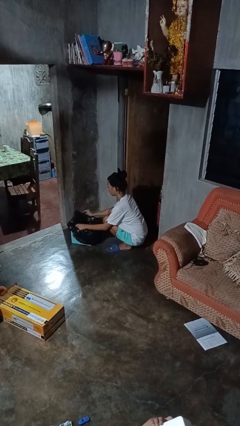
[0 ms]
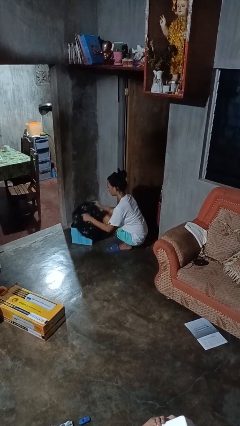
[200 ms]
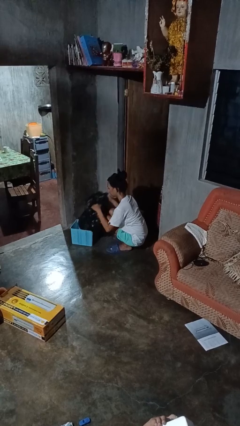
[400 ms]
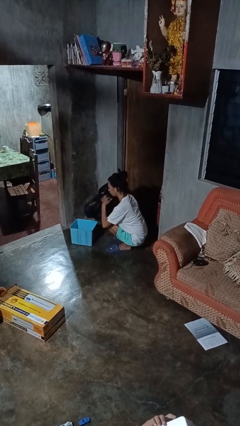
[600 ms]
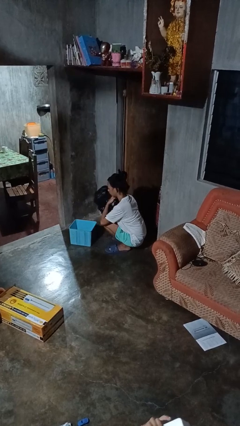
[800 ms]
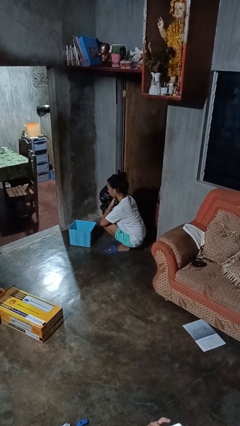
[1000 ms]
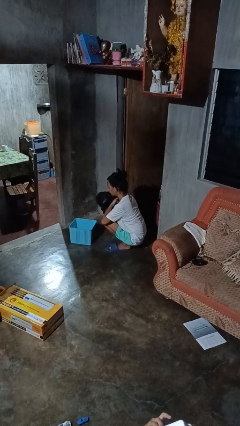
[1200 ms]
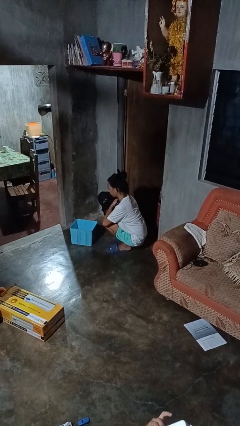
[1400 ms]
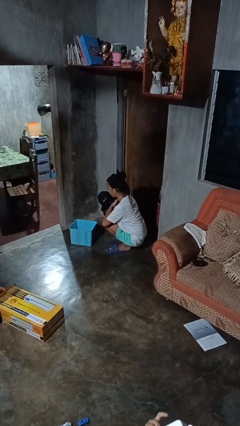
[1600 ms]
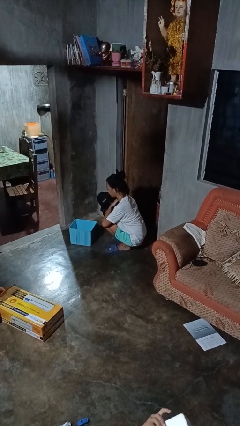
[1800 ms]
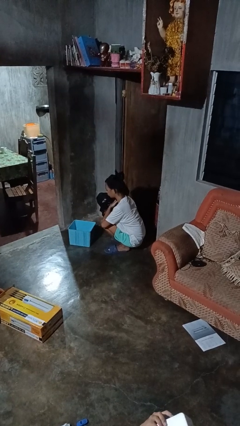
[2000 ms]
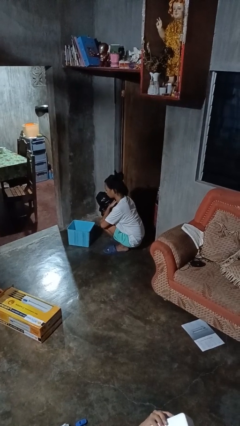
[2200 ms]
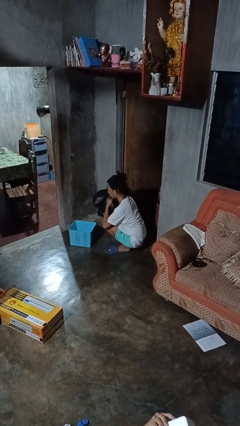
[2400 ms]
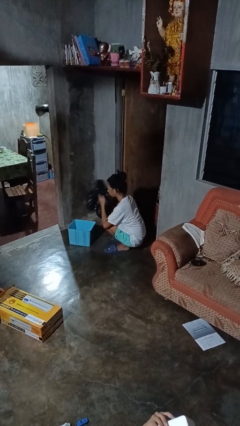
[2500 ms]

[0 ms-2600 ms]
person removes trashbag from trashcan

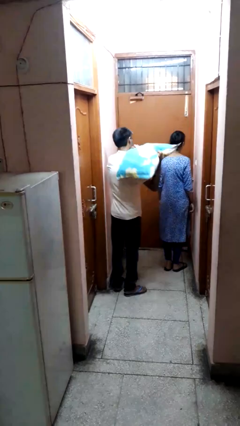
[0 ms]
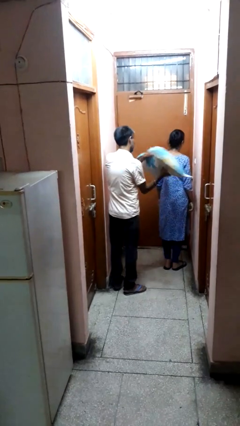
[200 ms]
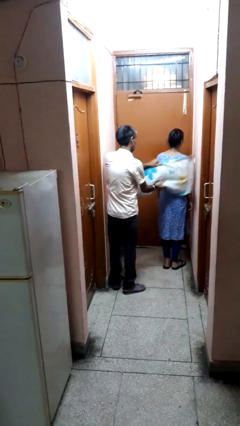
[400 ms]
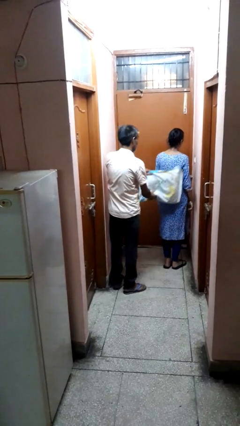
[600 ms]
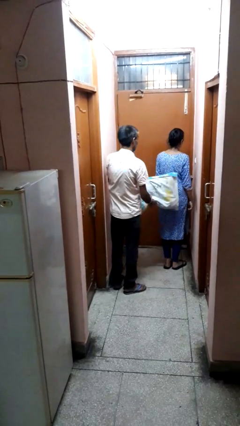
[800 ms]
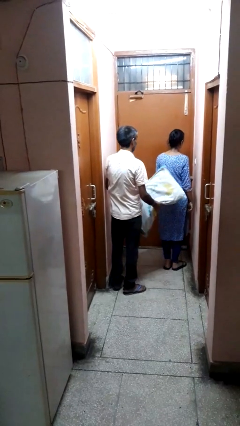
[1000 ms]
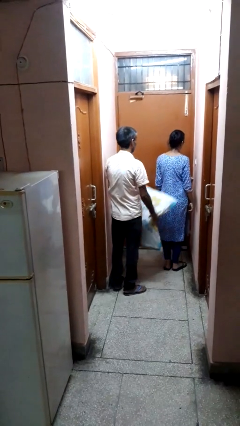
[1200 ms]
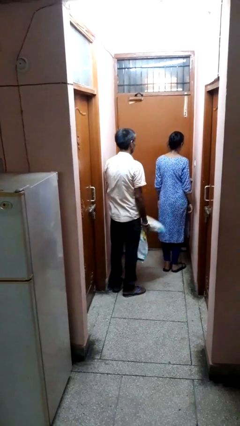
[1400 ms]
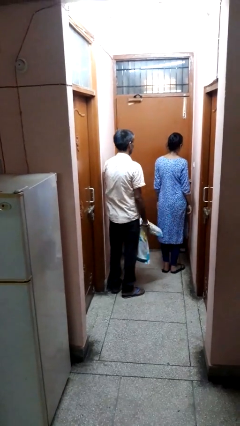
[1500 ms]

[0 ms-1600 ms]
person hits person with pillow

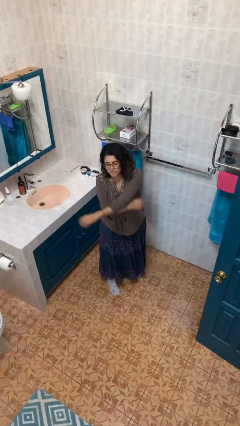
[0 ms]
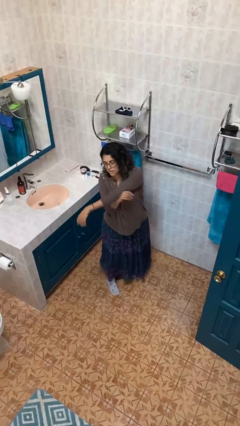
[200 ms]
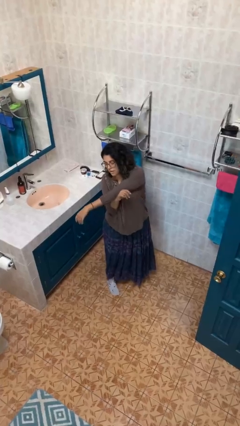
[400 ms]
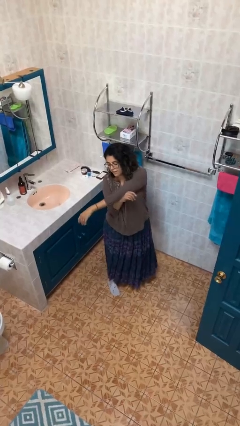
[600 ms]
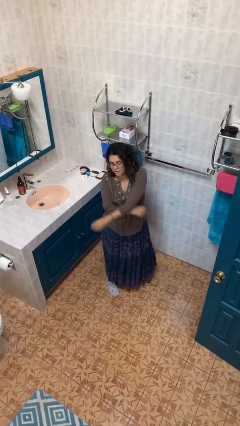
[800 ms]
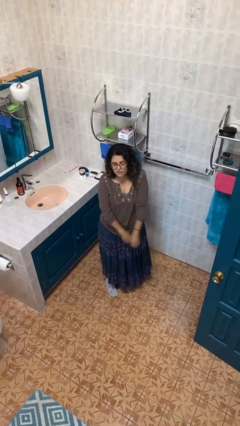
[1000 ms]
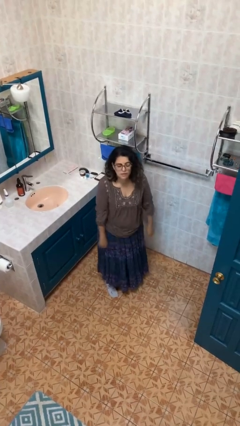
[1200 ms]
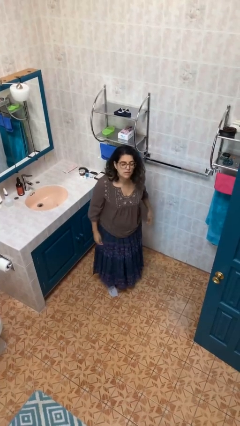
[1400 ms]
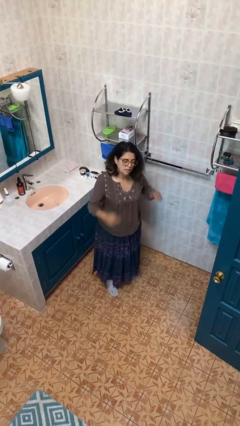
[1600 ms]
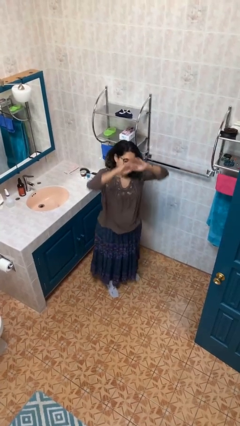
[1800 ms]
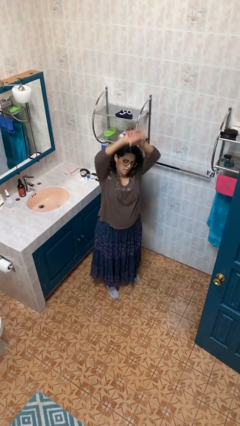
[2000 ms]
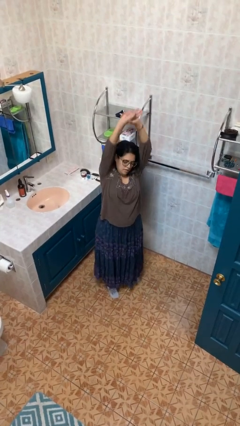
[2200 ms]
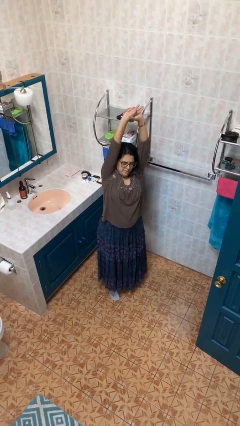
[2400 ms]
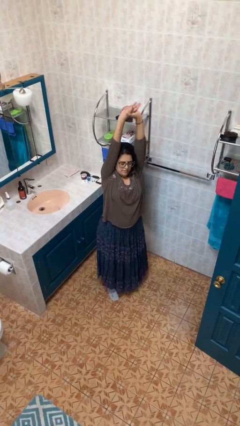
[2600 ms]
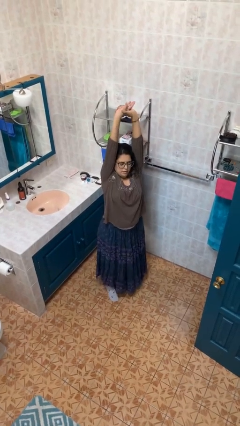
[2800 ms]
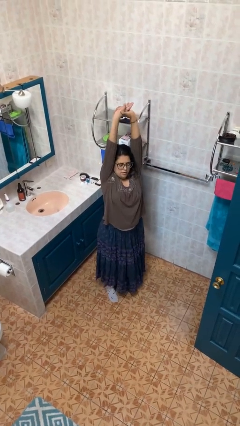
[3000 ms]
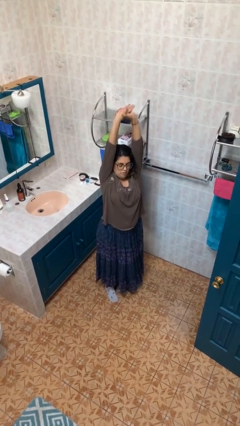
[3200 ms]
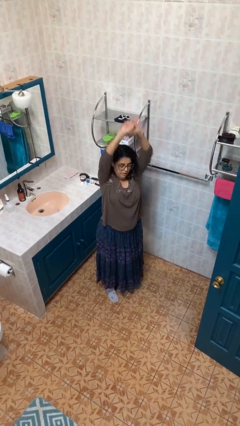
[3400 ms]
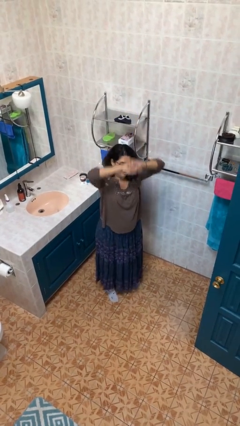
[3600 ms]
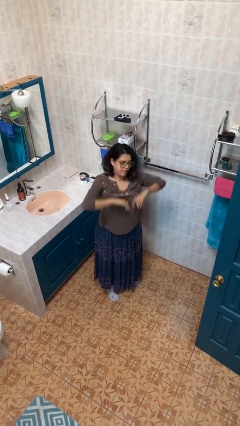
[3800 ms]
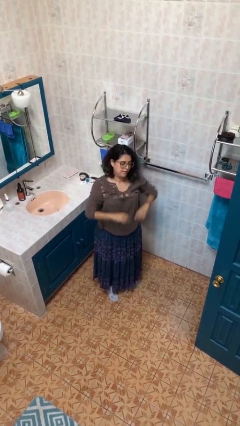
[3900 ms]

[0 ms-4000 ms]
person stretches arms over head

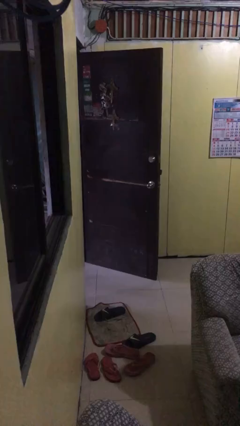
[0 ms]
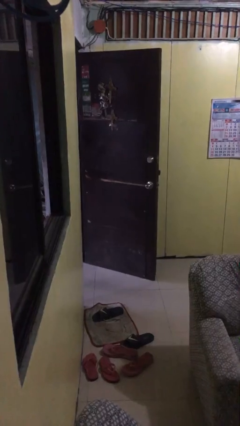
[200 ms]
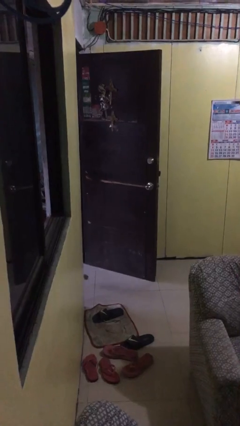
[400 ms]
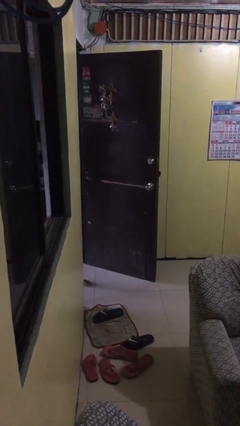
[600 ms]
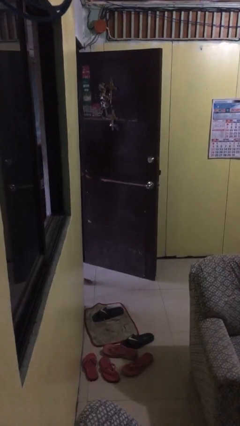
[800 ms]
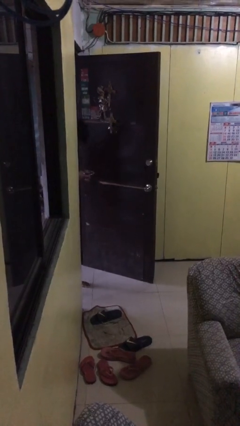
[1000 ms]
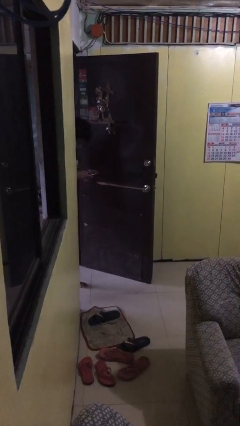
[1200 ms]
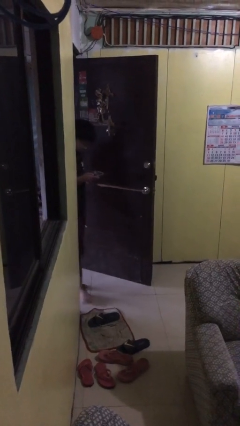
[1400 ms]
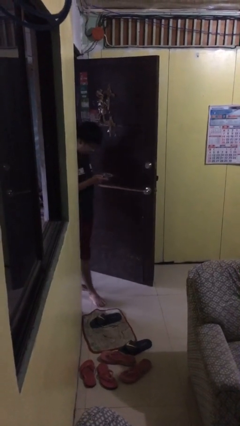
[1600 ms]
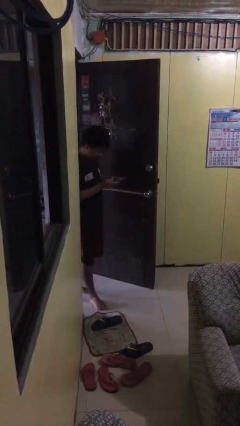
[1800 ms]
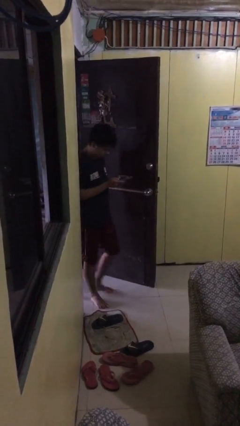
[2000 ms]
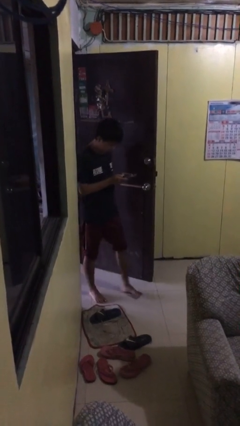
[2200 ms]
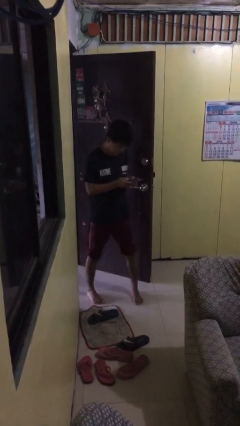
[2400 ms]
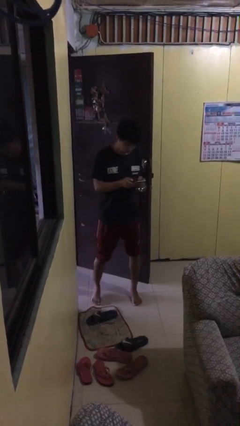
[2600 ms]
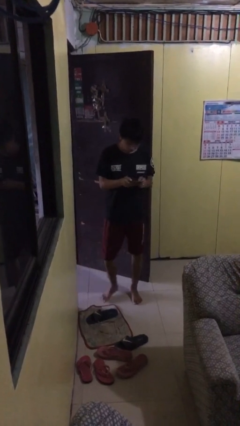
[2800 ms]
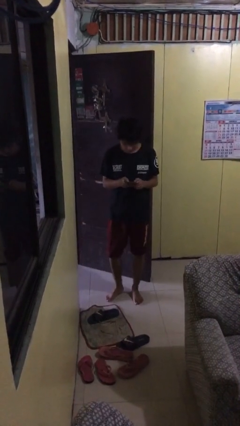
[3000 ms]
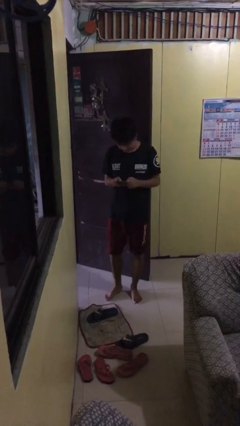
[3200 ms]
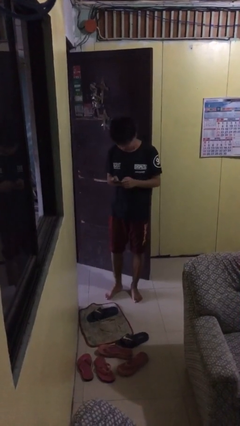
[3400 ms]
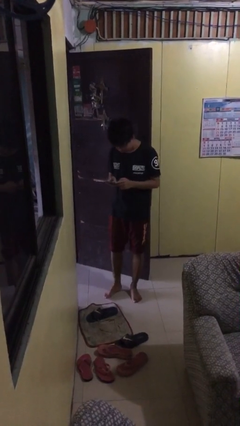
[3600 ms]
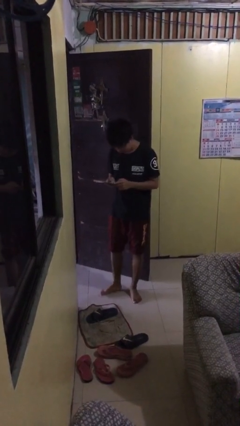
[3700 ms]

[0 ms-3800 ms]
person enters scene through structure

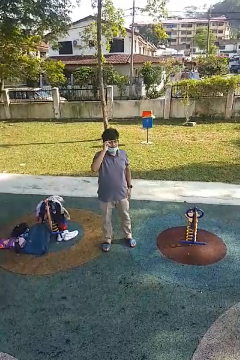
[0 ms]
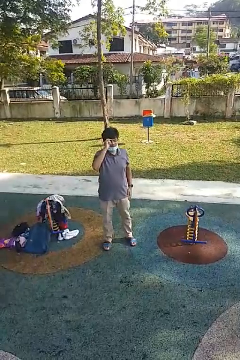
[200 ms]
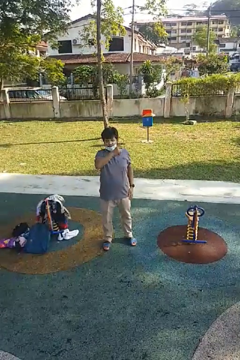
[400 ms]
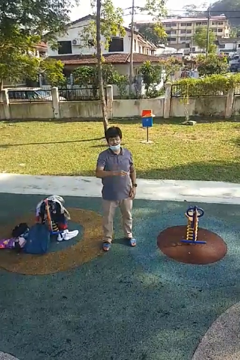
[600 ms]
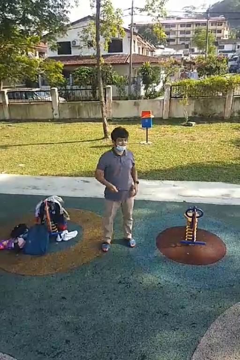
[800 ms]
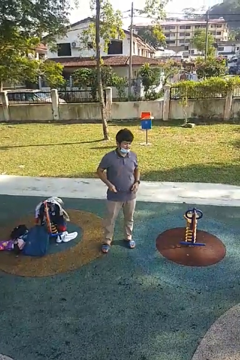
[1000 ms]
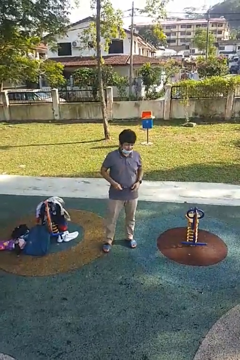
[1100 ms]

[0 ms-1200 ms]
person takes off glasses

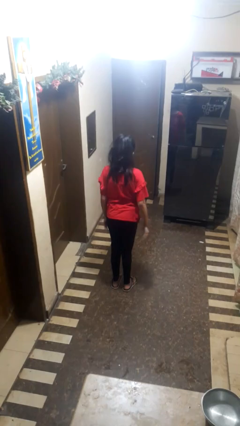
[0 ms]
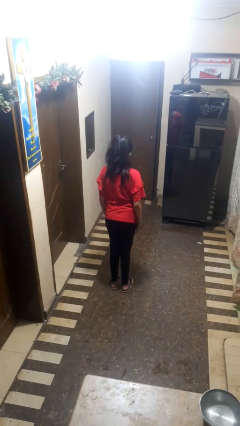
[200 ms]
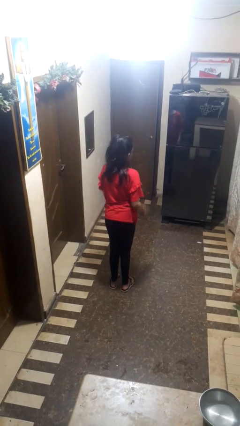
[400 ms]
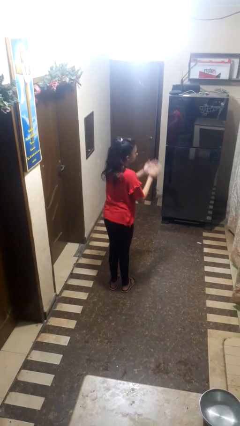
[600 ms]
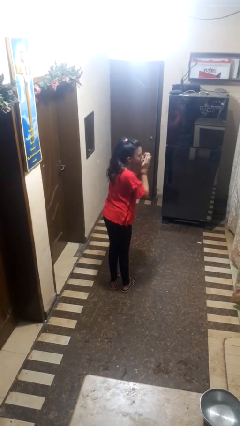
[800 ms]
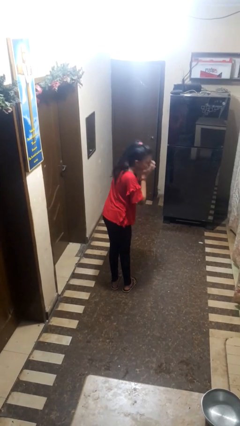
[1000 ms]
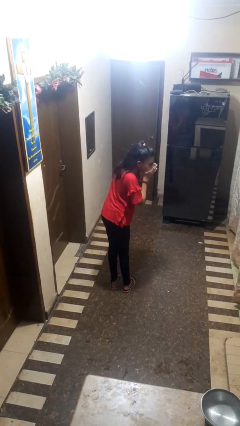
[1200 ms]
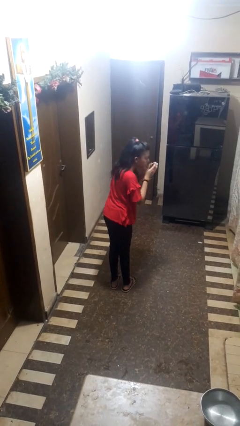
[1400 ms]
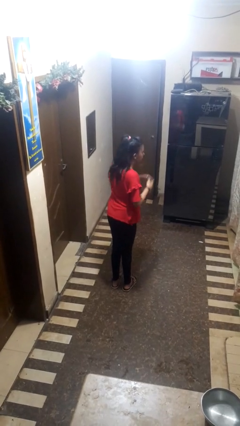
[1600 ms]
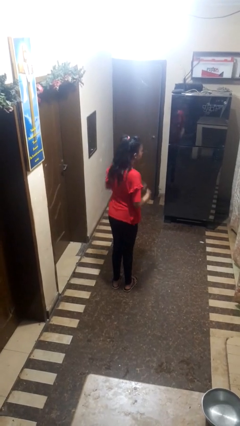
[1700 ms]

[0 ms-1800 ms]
person sneezes into hand

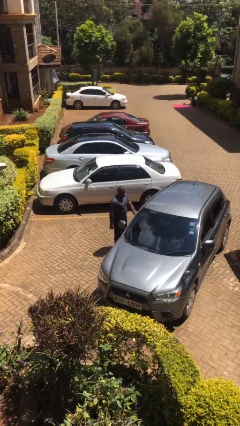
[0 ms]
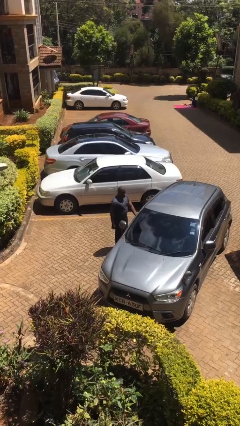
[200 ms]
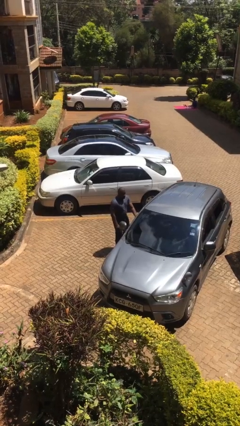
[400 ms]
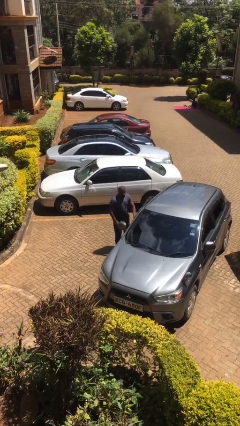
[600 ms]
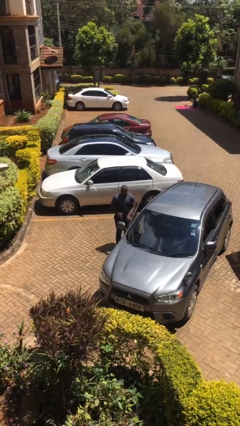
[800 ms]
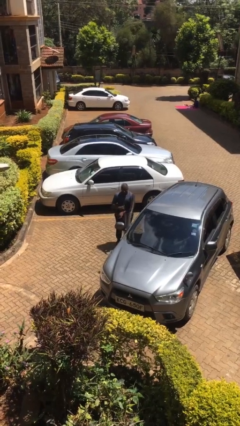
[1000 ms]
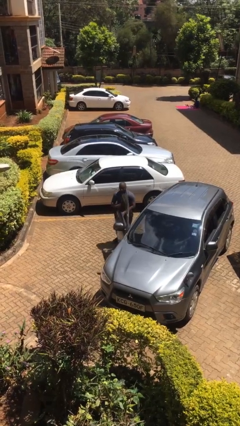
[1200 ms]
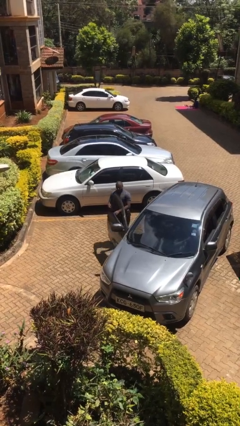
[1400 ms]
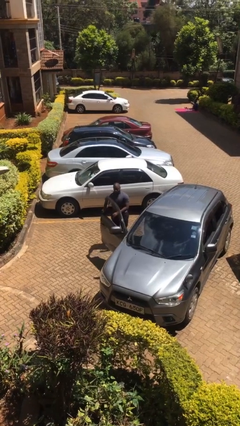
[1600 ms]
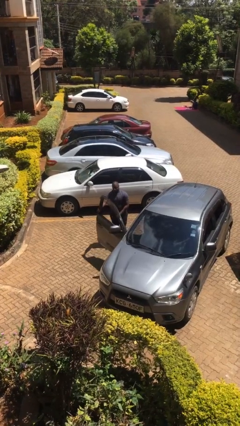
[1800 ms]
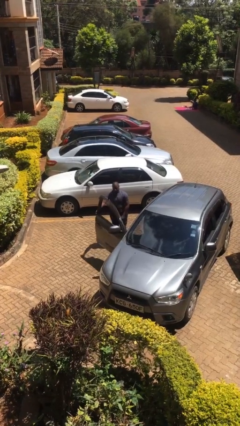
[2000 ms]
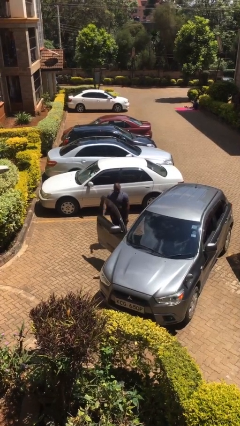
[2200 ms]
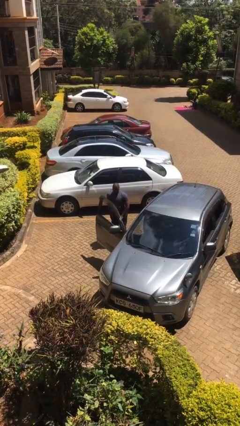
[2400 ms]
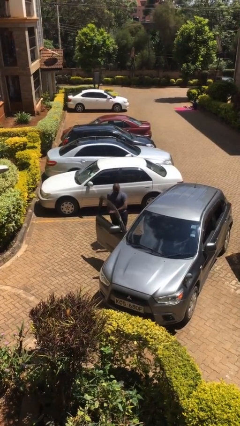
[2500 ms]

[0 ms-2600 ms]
person opens car door
